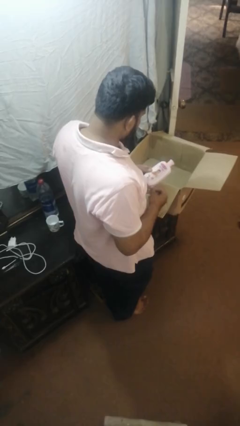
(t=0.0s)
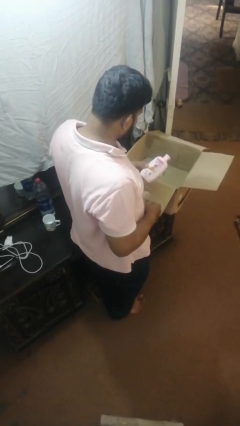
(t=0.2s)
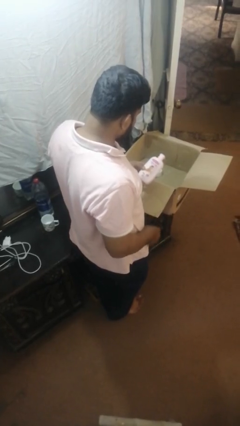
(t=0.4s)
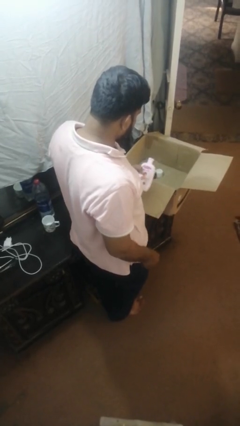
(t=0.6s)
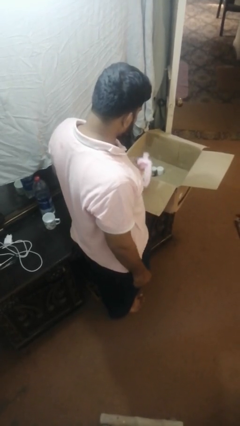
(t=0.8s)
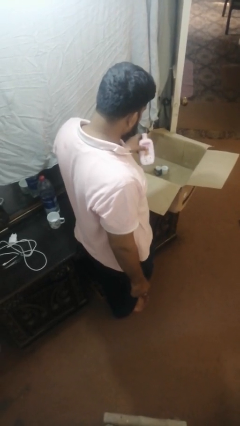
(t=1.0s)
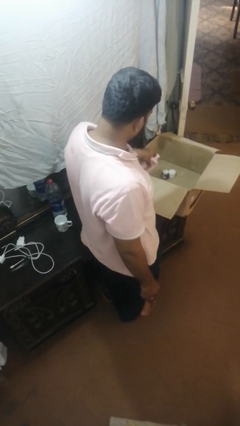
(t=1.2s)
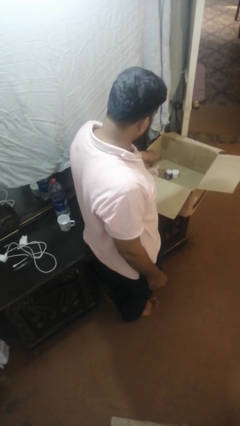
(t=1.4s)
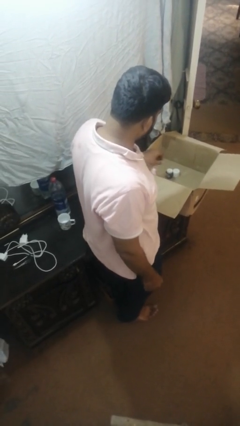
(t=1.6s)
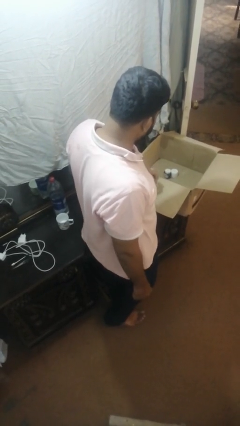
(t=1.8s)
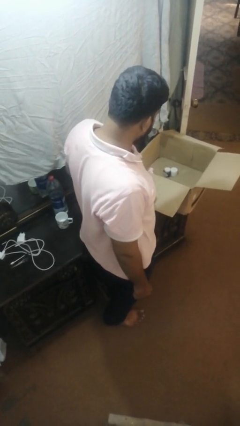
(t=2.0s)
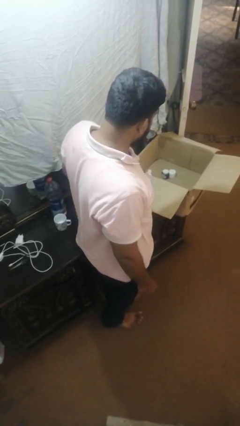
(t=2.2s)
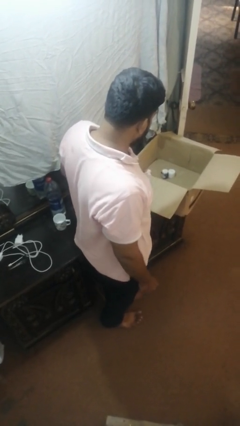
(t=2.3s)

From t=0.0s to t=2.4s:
person puts object into box

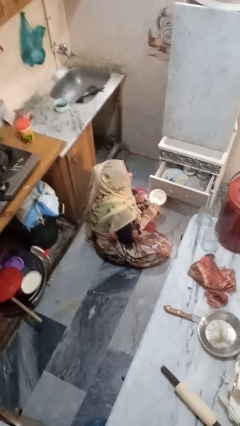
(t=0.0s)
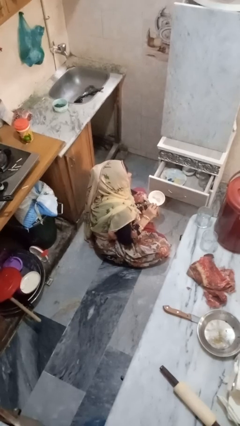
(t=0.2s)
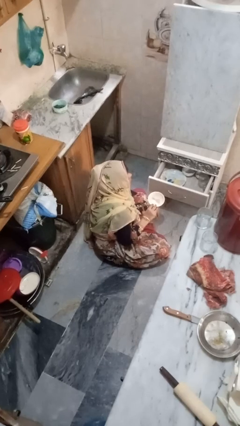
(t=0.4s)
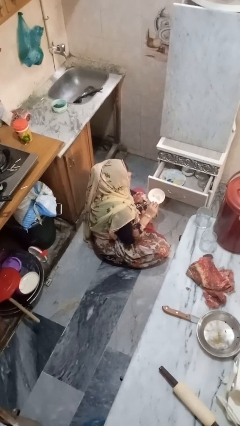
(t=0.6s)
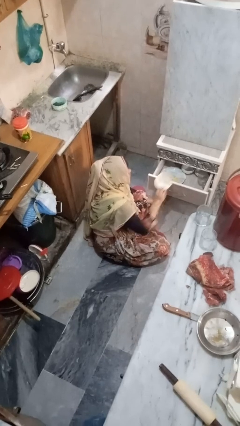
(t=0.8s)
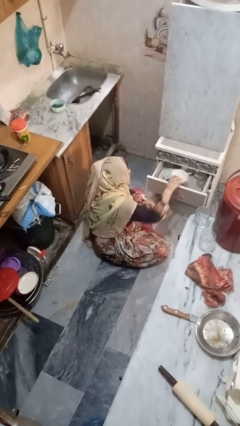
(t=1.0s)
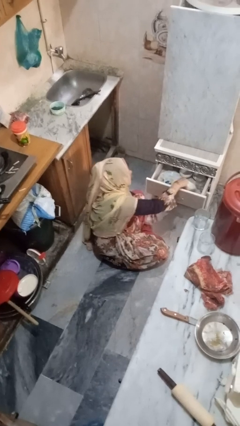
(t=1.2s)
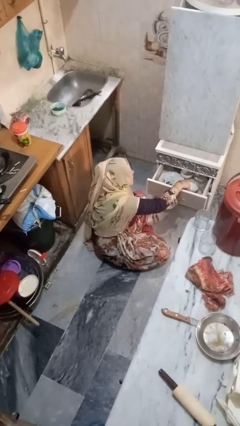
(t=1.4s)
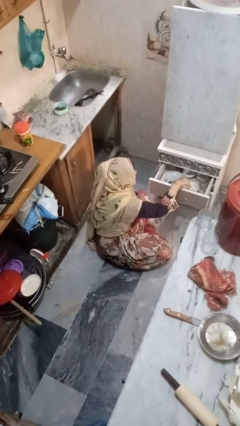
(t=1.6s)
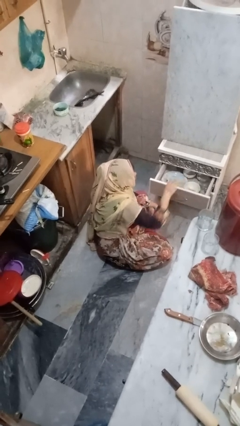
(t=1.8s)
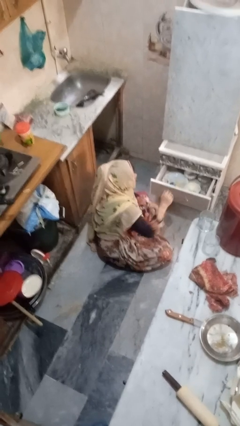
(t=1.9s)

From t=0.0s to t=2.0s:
person puts object into kitchen drawer

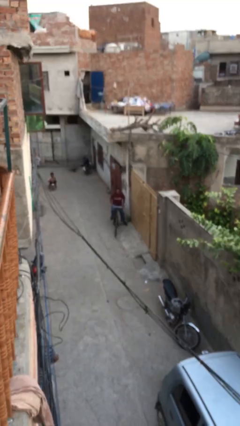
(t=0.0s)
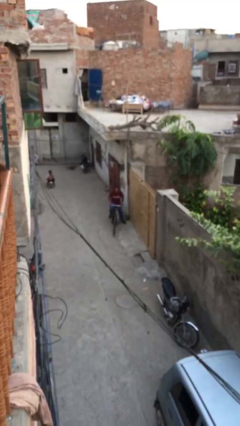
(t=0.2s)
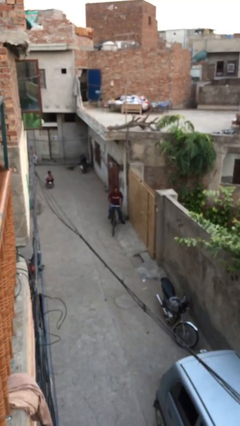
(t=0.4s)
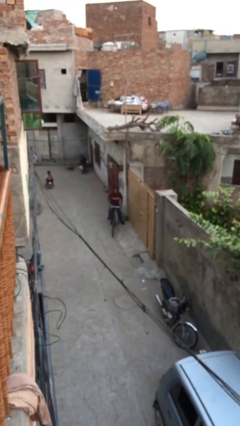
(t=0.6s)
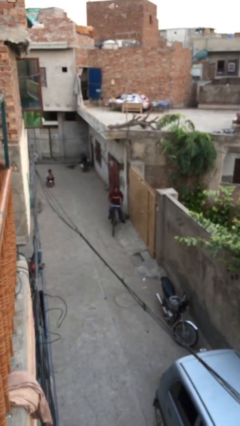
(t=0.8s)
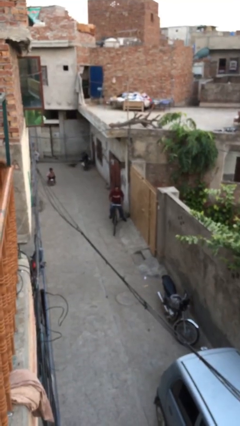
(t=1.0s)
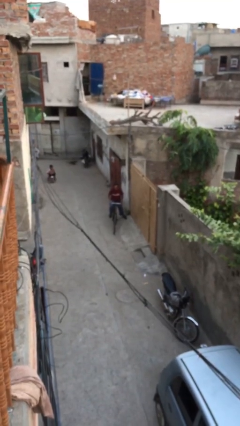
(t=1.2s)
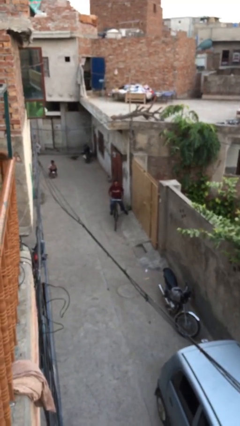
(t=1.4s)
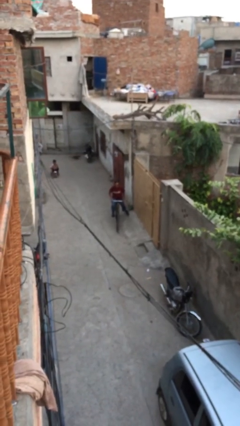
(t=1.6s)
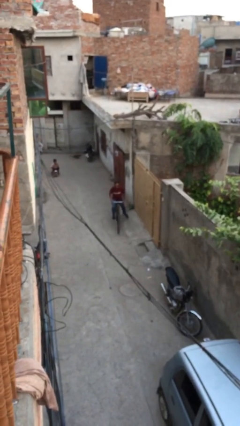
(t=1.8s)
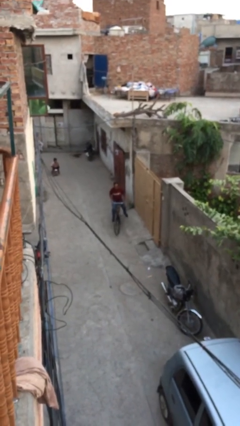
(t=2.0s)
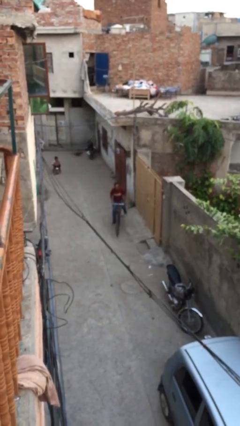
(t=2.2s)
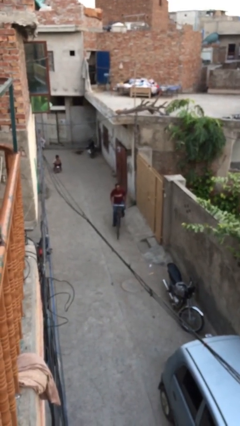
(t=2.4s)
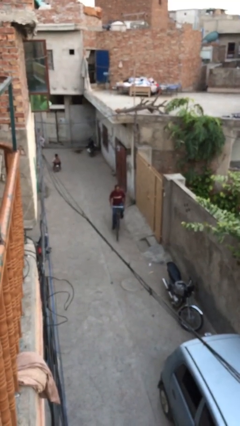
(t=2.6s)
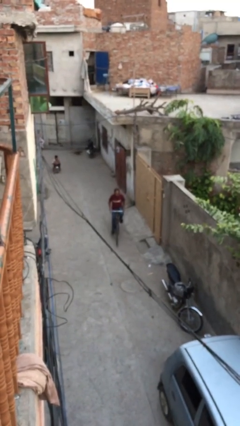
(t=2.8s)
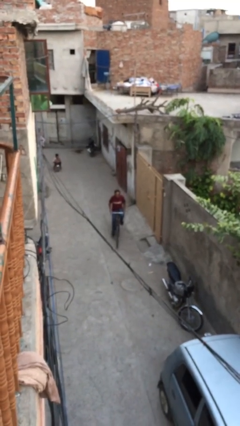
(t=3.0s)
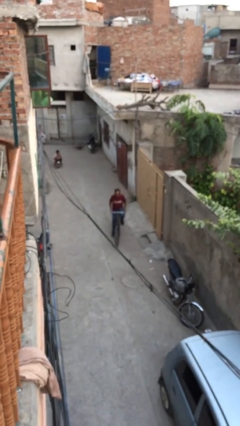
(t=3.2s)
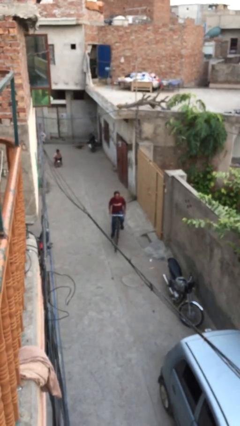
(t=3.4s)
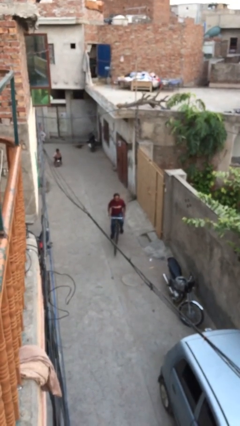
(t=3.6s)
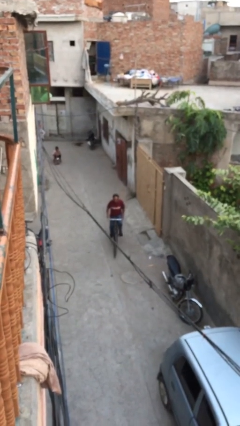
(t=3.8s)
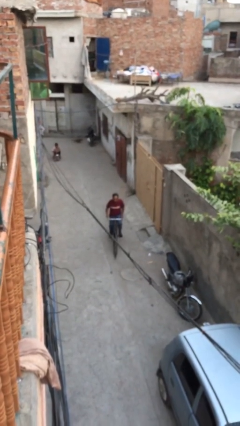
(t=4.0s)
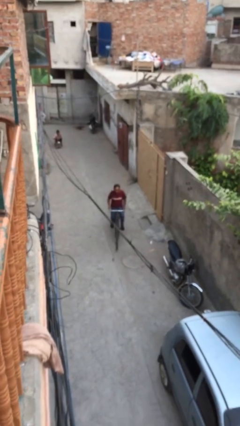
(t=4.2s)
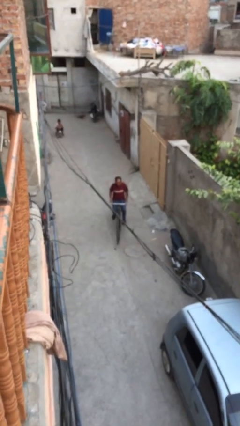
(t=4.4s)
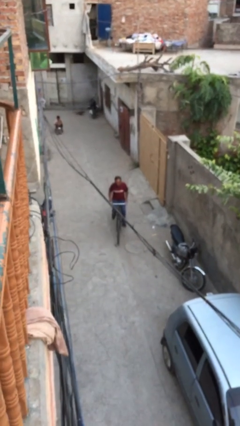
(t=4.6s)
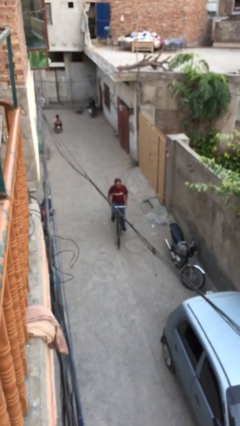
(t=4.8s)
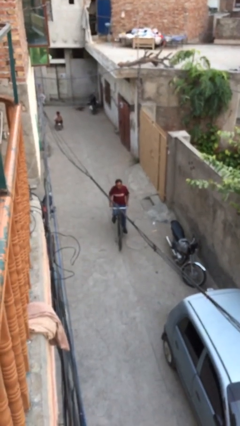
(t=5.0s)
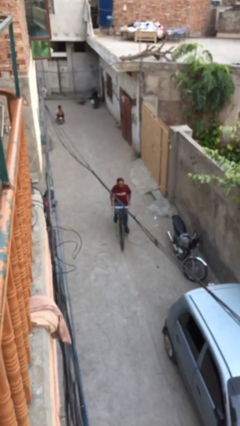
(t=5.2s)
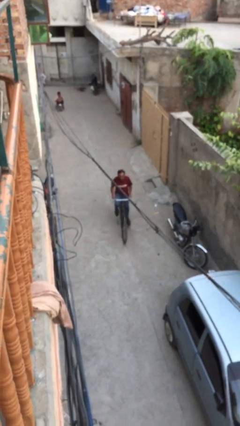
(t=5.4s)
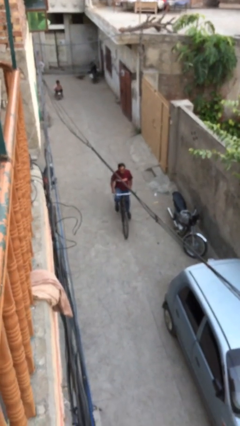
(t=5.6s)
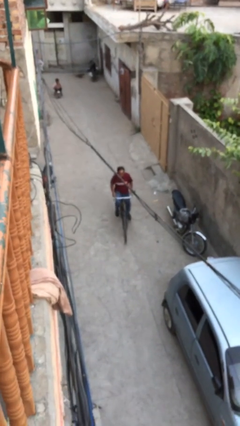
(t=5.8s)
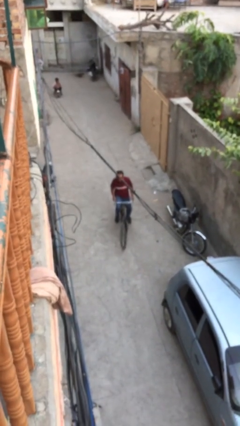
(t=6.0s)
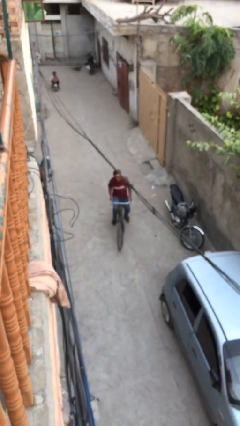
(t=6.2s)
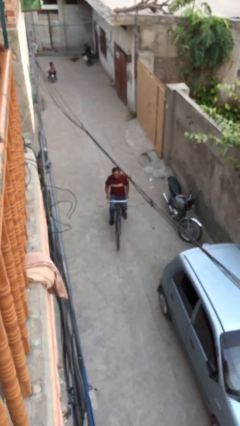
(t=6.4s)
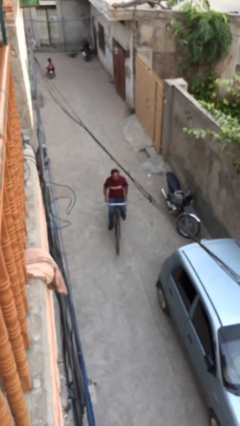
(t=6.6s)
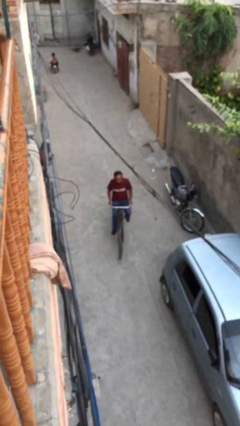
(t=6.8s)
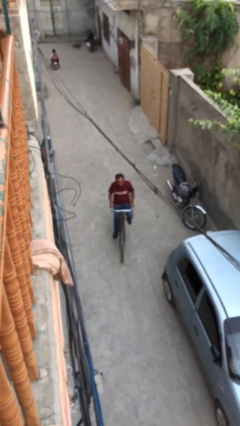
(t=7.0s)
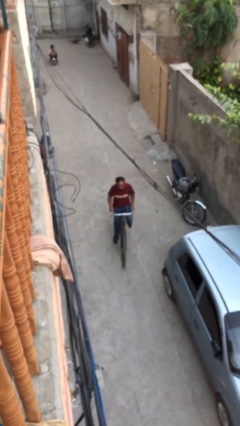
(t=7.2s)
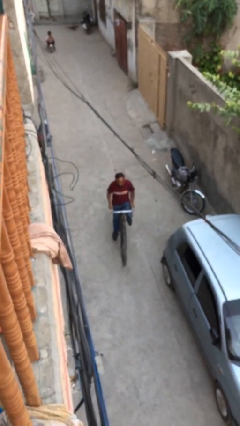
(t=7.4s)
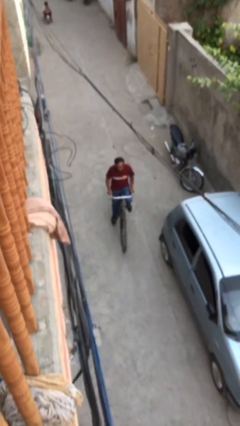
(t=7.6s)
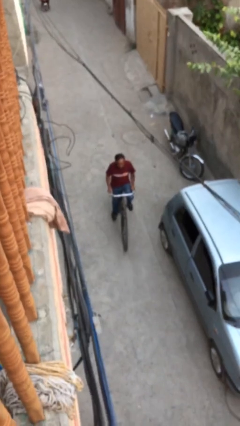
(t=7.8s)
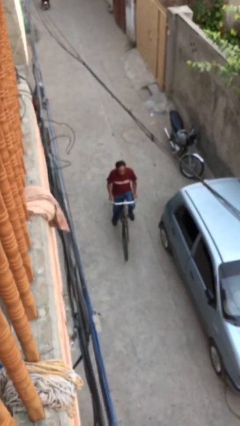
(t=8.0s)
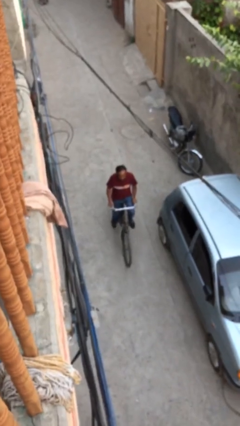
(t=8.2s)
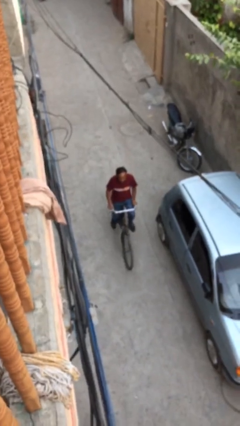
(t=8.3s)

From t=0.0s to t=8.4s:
person rides bicycle

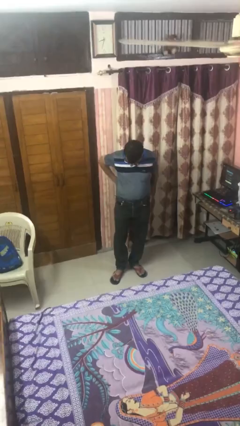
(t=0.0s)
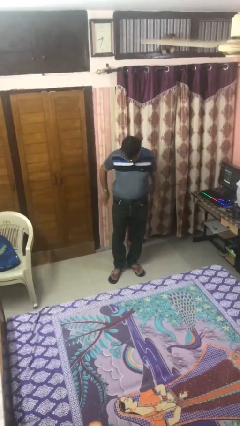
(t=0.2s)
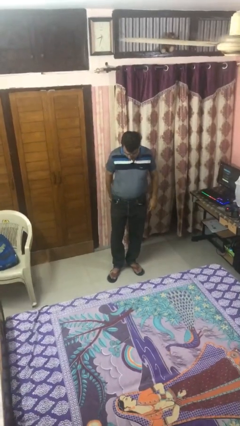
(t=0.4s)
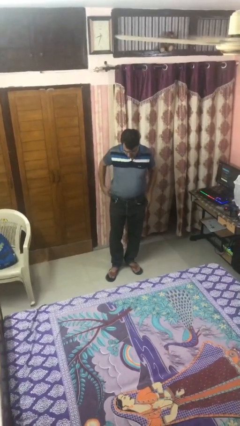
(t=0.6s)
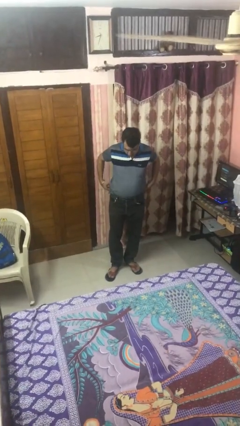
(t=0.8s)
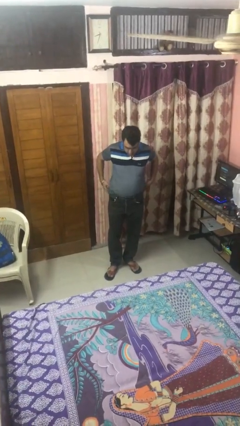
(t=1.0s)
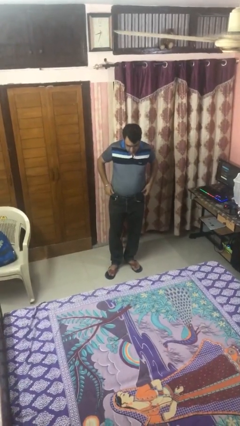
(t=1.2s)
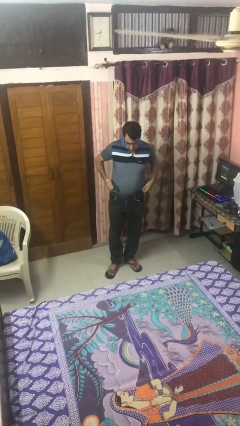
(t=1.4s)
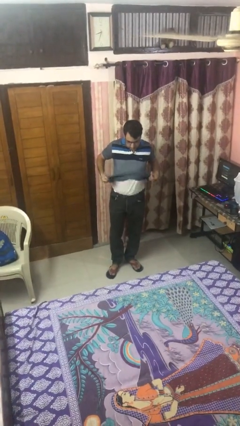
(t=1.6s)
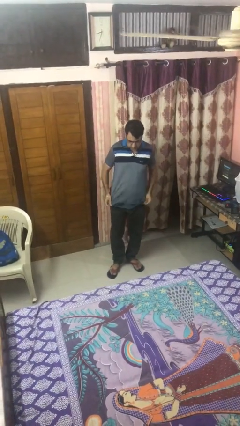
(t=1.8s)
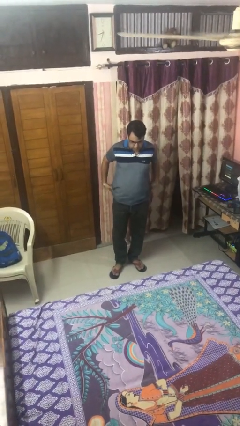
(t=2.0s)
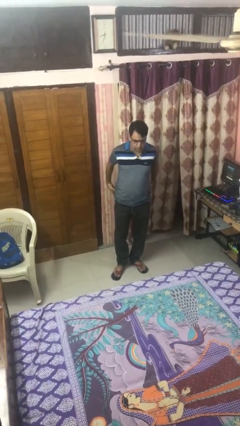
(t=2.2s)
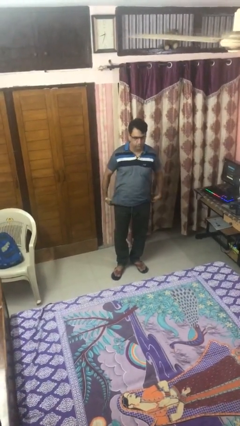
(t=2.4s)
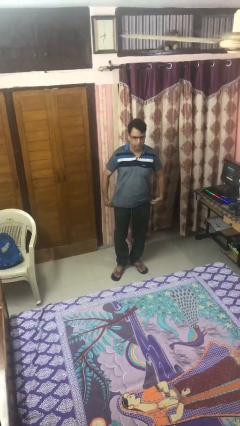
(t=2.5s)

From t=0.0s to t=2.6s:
person untucks shirt

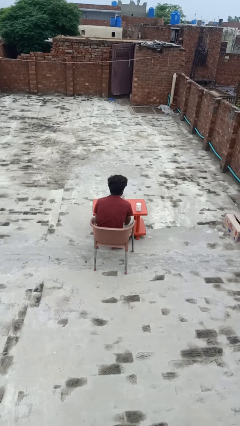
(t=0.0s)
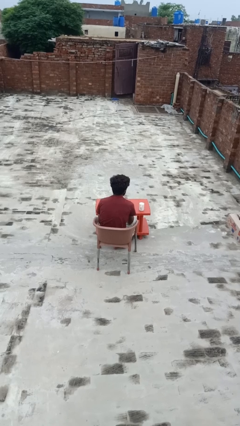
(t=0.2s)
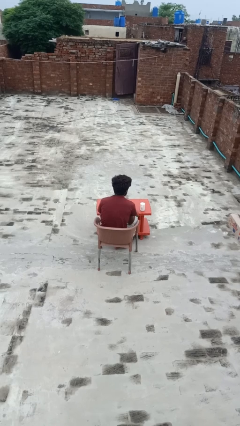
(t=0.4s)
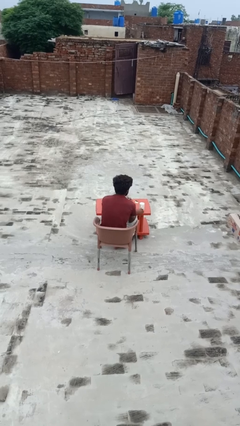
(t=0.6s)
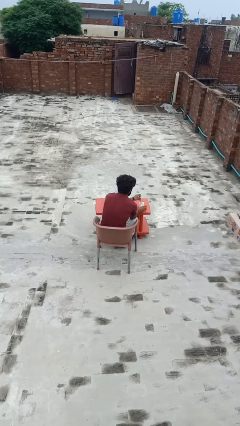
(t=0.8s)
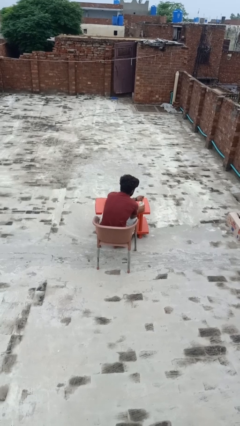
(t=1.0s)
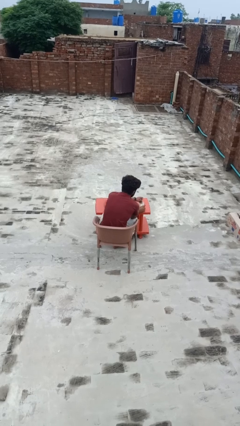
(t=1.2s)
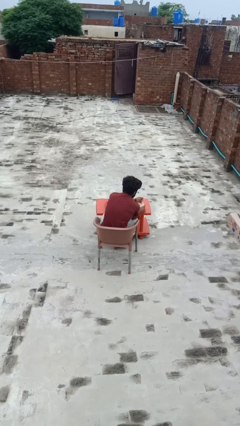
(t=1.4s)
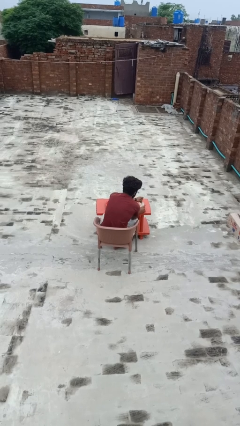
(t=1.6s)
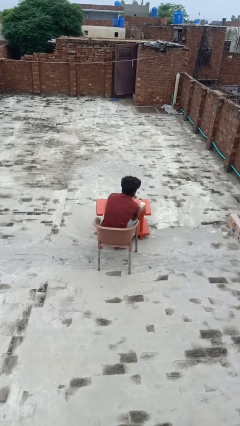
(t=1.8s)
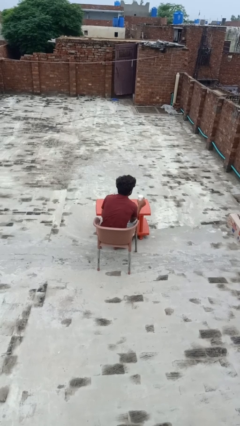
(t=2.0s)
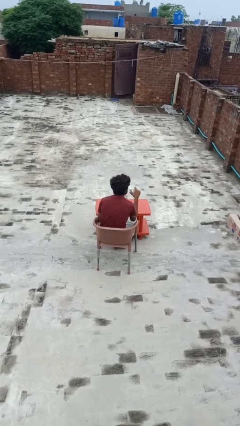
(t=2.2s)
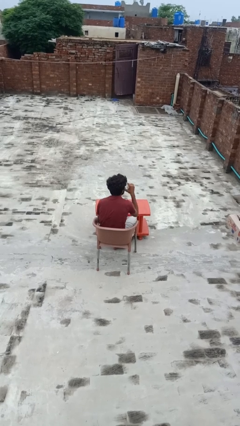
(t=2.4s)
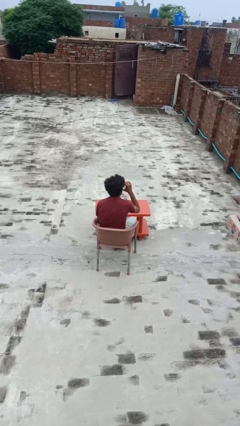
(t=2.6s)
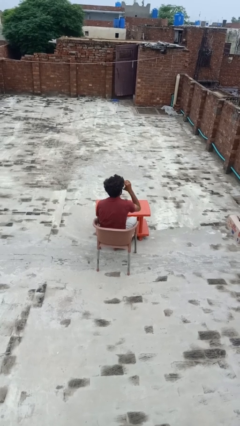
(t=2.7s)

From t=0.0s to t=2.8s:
person stirs mug
